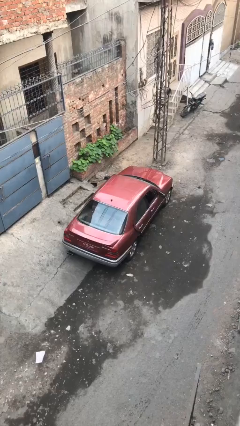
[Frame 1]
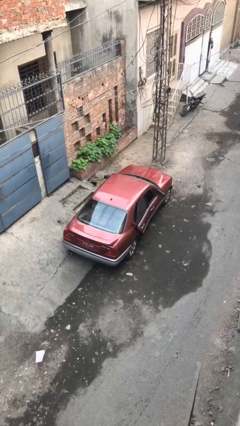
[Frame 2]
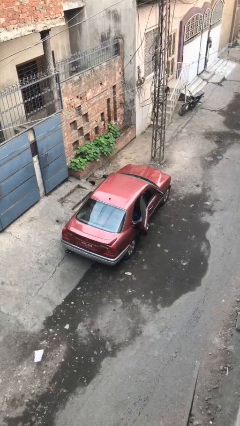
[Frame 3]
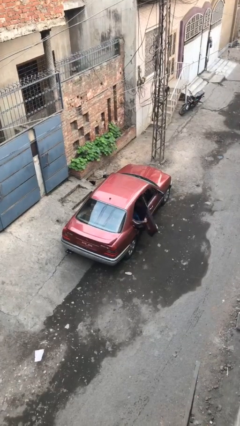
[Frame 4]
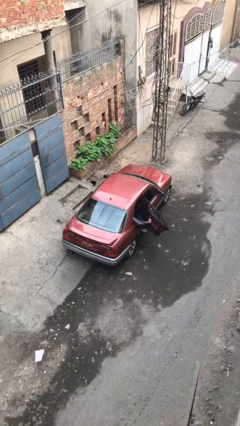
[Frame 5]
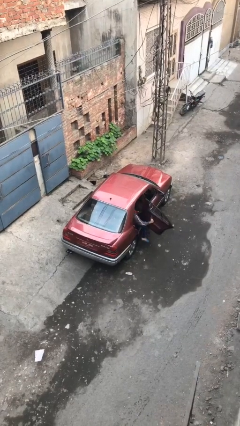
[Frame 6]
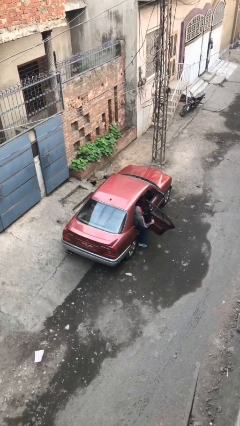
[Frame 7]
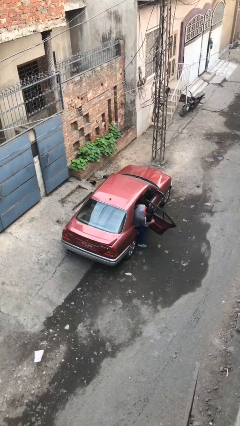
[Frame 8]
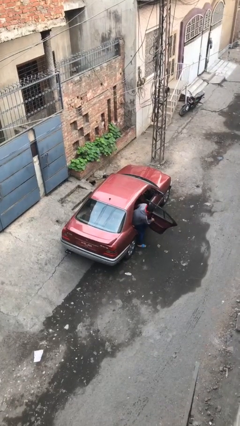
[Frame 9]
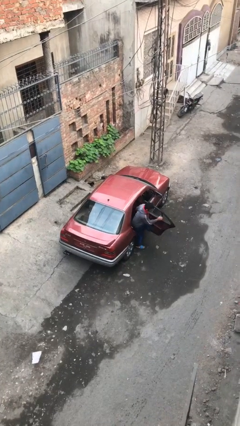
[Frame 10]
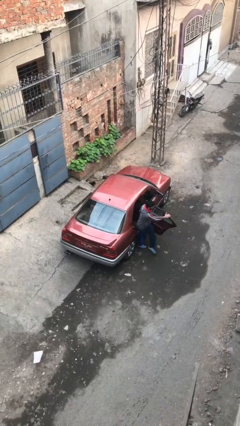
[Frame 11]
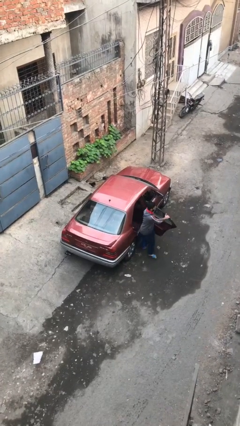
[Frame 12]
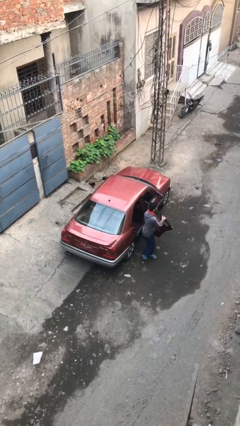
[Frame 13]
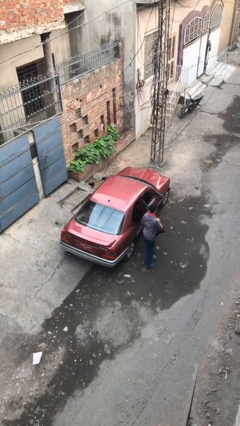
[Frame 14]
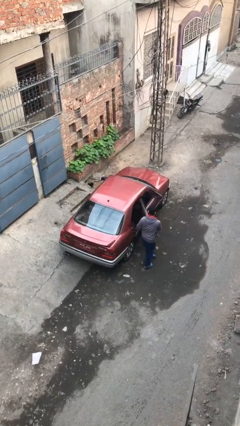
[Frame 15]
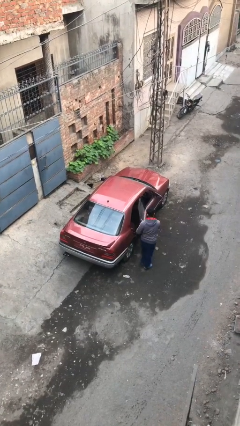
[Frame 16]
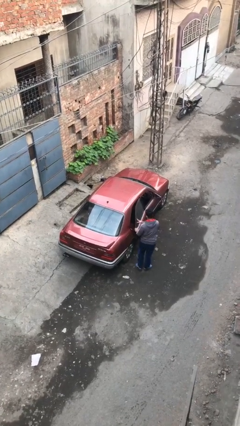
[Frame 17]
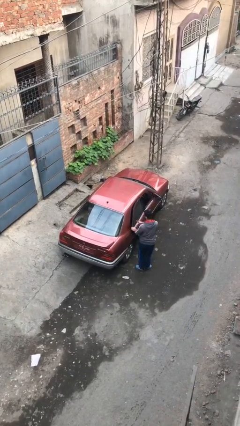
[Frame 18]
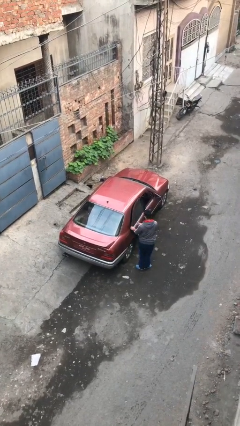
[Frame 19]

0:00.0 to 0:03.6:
car drops off person

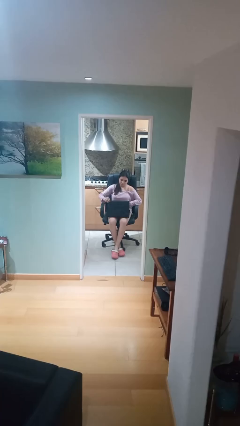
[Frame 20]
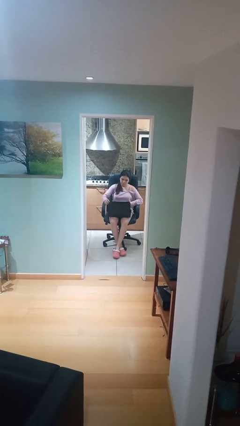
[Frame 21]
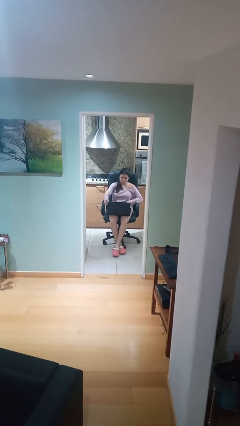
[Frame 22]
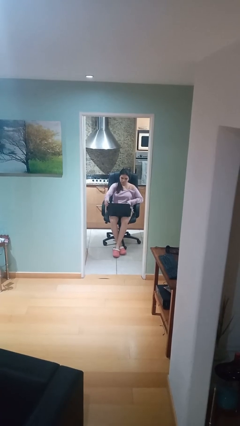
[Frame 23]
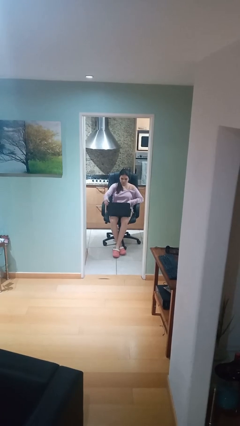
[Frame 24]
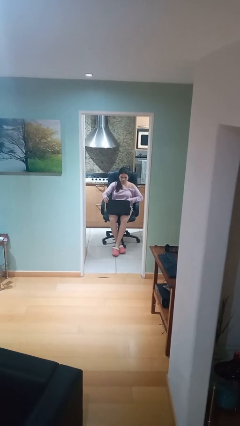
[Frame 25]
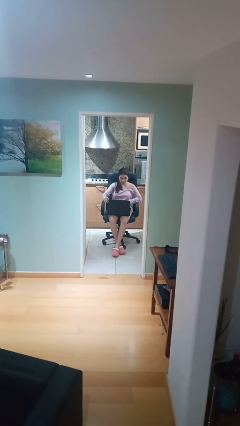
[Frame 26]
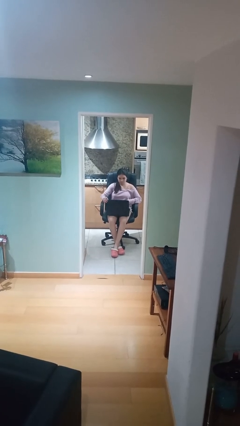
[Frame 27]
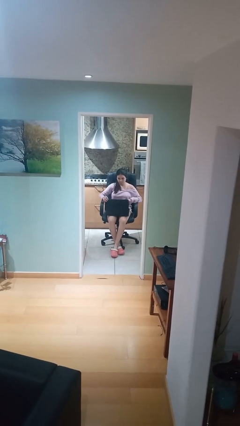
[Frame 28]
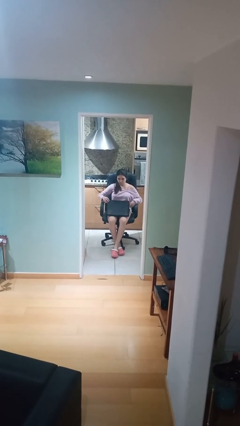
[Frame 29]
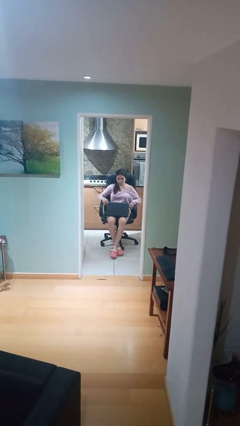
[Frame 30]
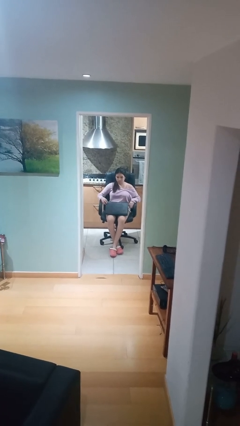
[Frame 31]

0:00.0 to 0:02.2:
person interacts with laptop

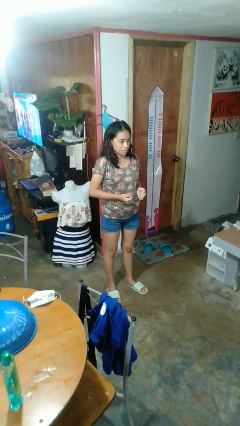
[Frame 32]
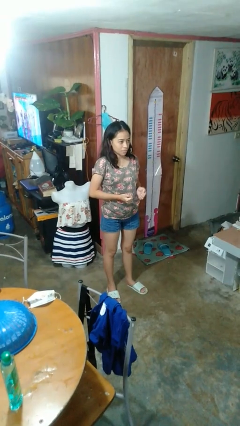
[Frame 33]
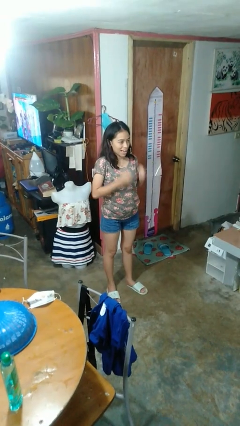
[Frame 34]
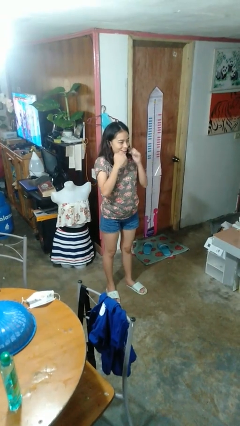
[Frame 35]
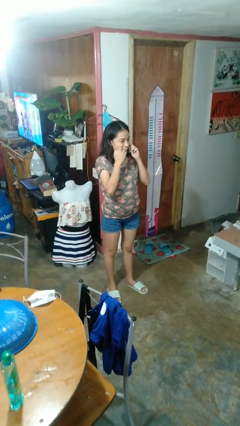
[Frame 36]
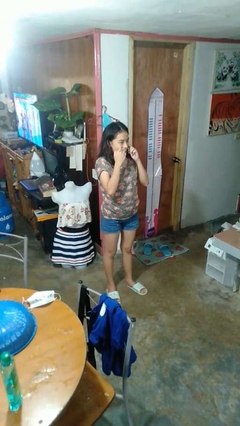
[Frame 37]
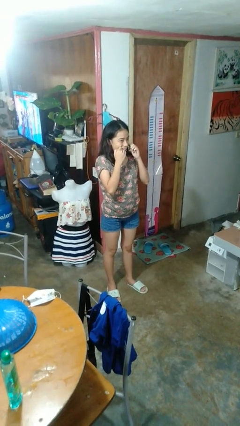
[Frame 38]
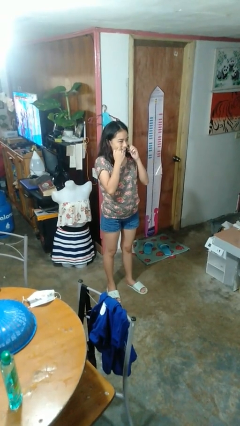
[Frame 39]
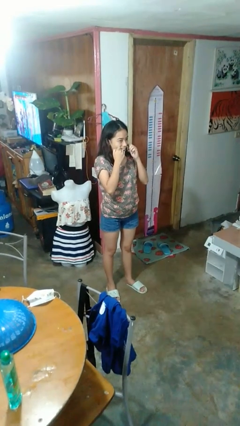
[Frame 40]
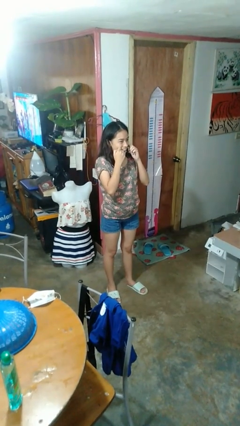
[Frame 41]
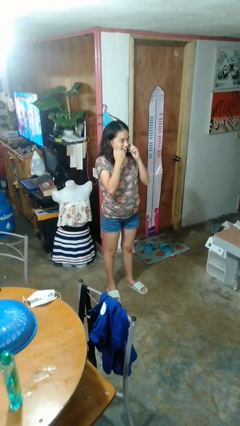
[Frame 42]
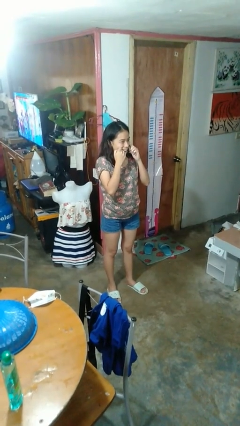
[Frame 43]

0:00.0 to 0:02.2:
person flosses

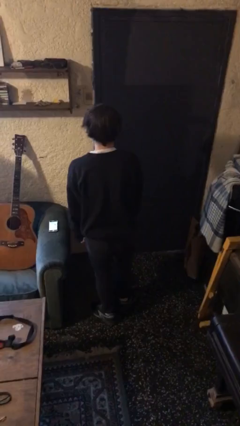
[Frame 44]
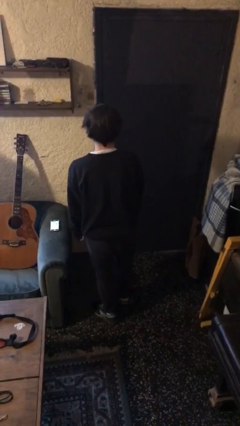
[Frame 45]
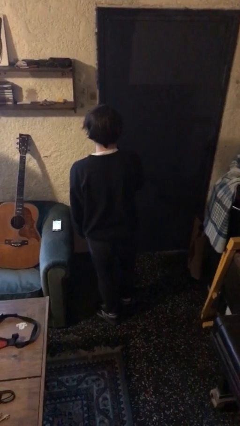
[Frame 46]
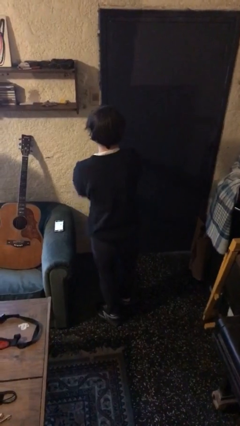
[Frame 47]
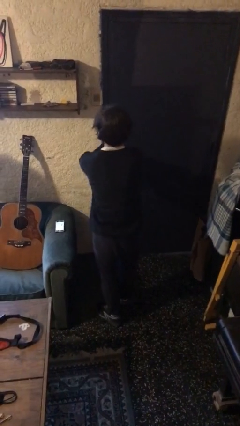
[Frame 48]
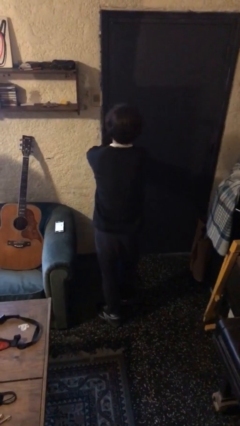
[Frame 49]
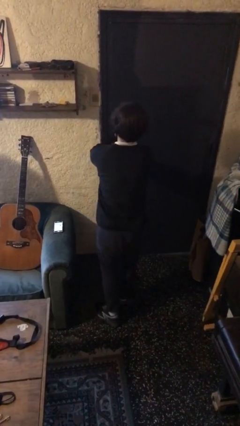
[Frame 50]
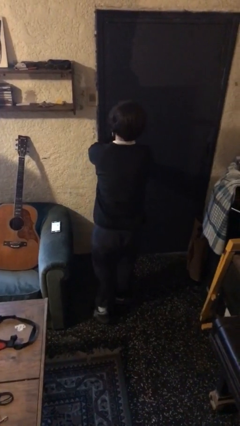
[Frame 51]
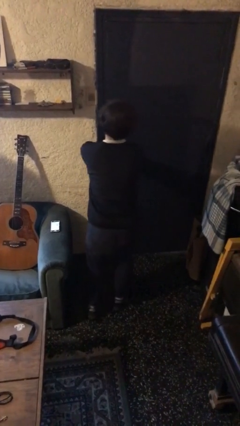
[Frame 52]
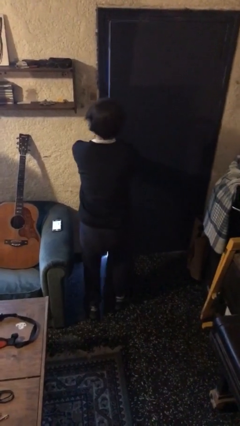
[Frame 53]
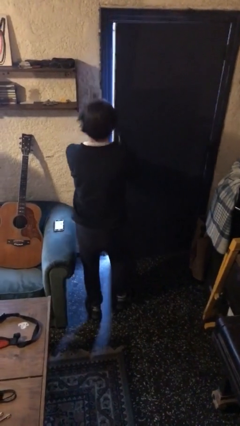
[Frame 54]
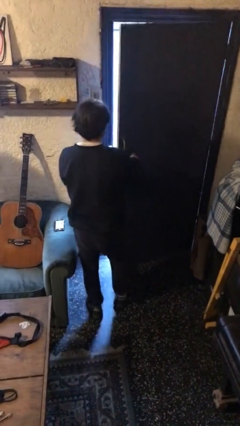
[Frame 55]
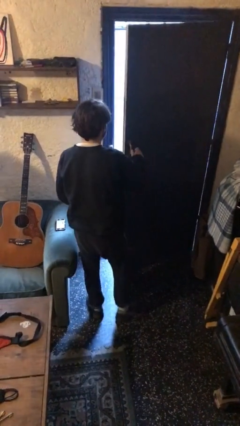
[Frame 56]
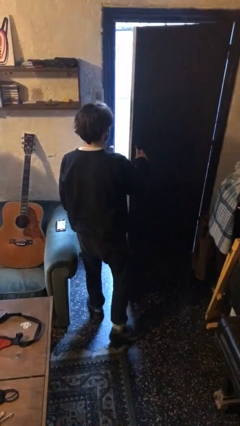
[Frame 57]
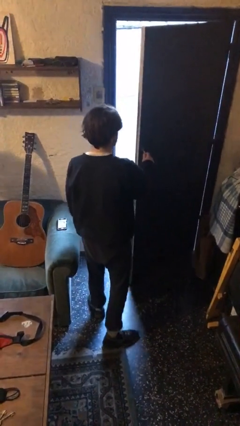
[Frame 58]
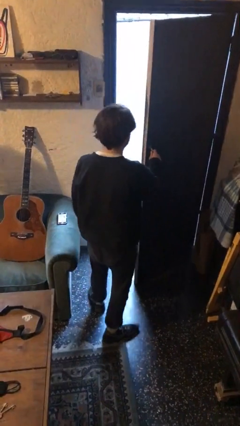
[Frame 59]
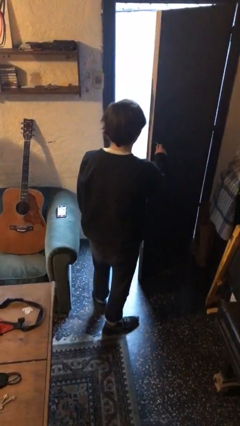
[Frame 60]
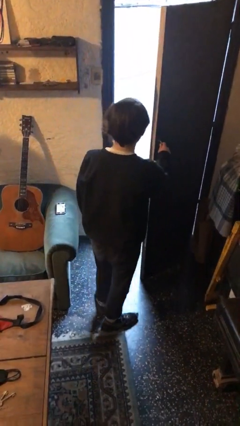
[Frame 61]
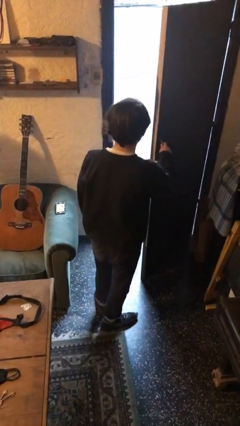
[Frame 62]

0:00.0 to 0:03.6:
person opens facility door

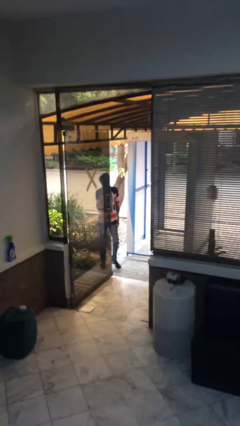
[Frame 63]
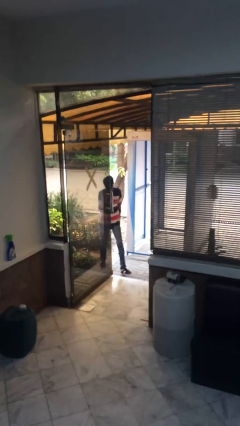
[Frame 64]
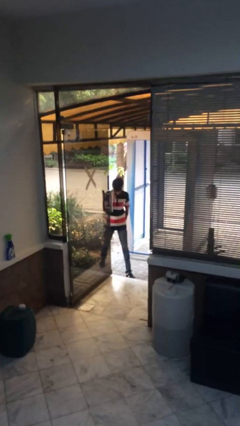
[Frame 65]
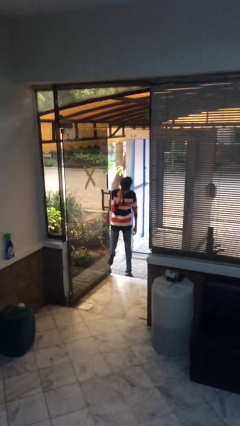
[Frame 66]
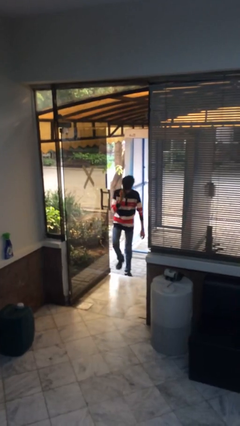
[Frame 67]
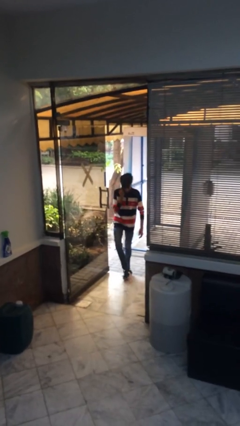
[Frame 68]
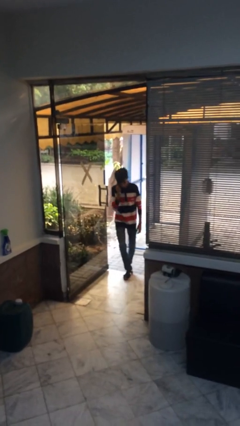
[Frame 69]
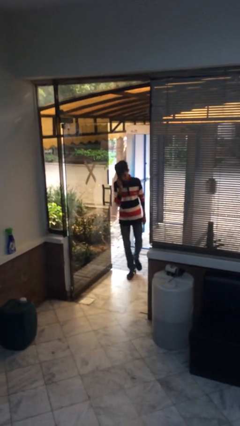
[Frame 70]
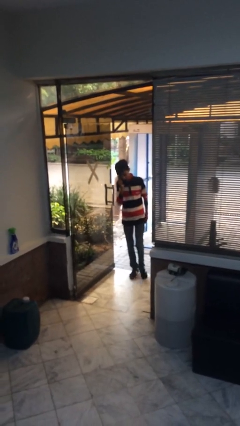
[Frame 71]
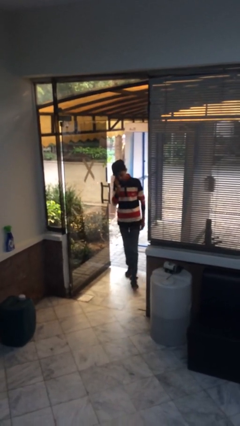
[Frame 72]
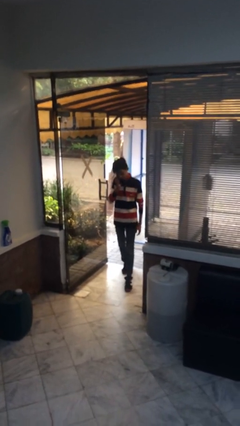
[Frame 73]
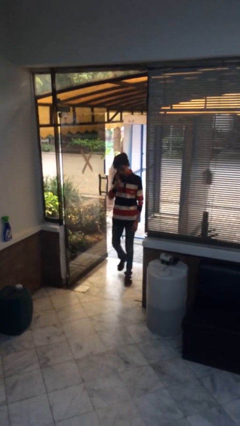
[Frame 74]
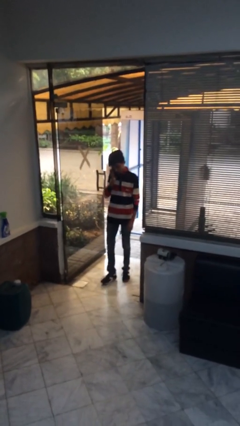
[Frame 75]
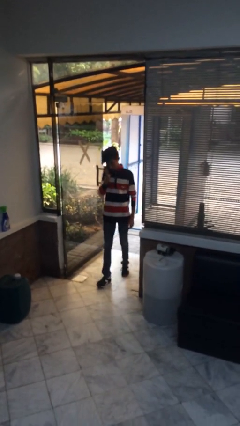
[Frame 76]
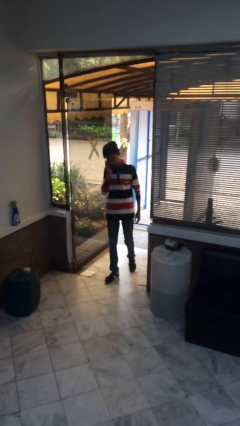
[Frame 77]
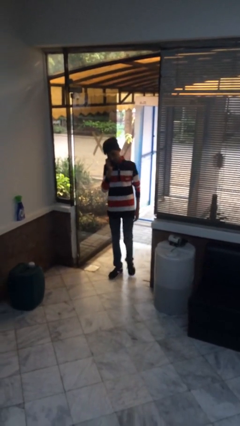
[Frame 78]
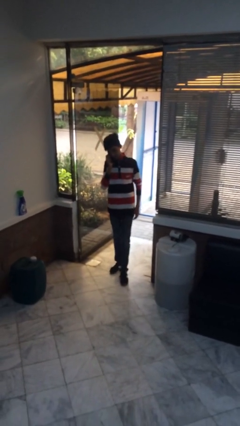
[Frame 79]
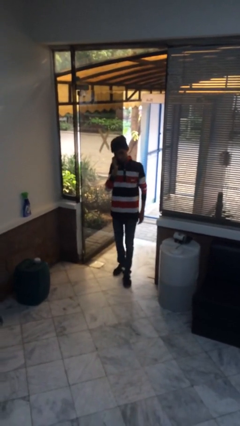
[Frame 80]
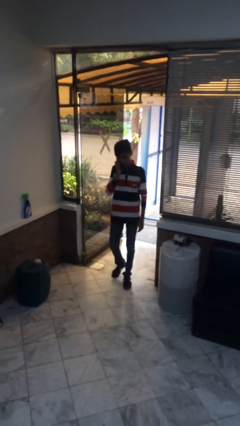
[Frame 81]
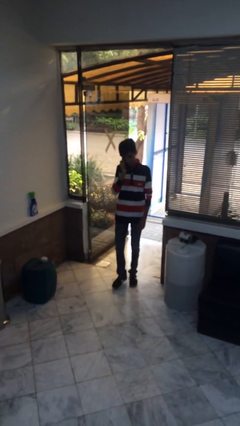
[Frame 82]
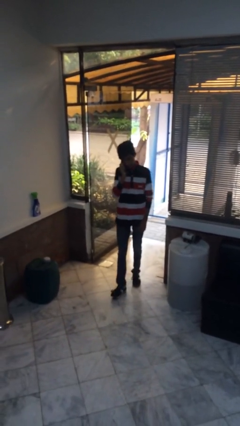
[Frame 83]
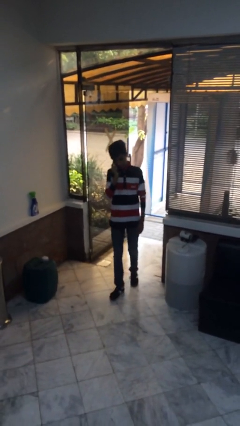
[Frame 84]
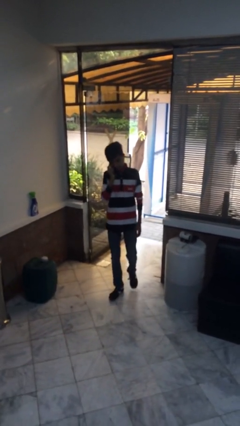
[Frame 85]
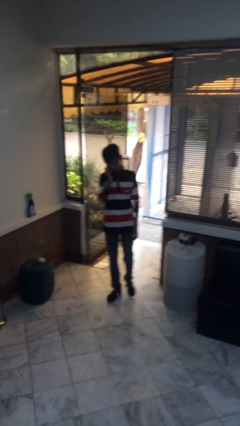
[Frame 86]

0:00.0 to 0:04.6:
person enters scene through structure

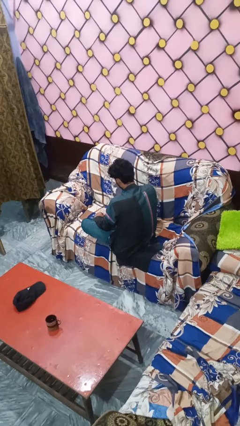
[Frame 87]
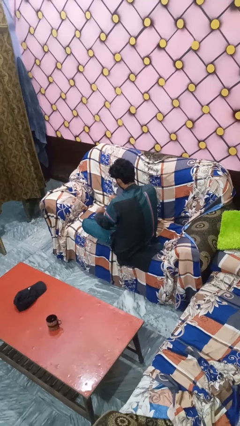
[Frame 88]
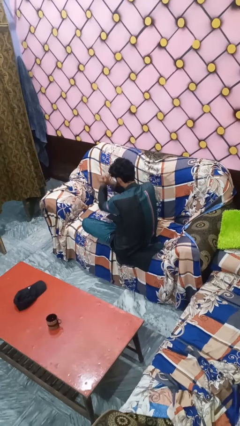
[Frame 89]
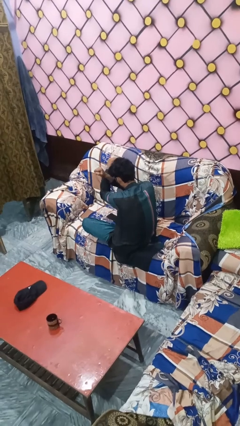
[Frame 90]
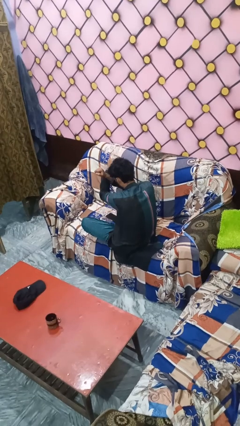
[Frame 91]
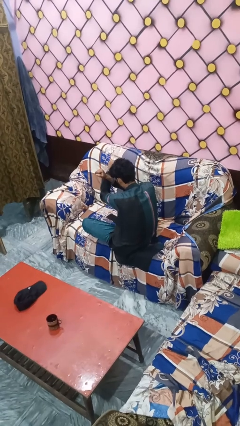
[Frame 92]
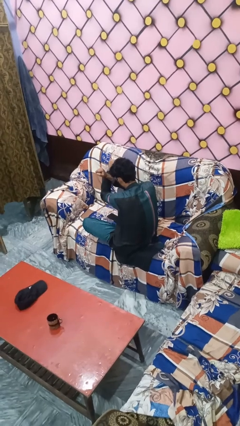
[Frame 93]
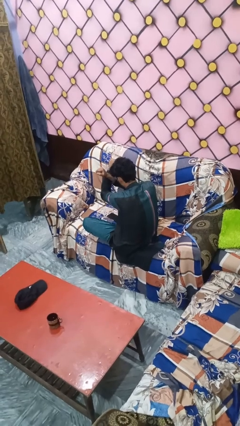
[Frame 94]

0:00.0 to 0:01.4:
person gestures arms x
